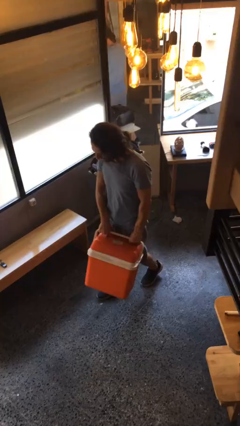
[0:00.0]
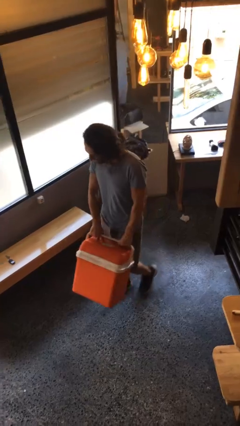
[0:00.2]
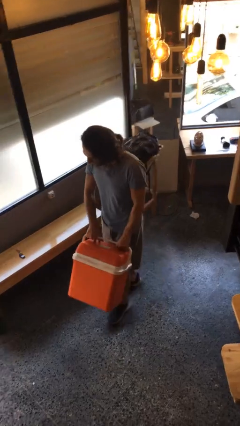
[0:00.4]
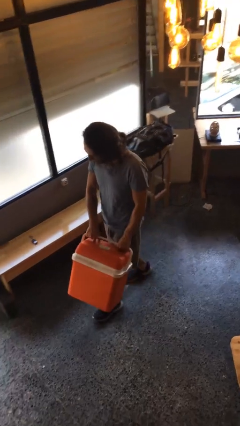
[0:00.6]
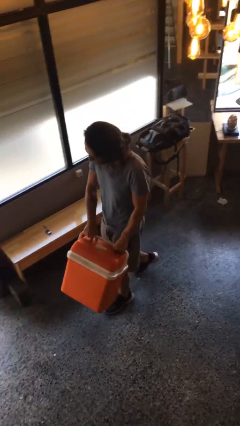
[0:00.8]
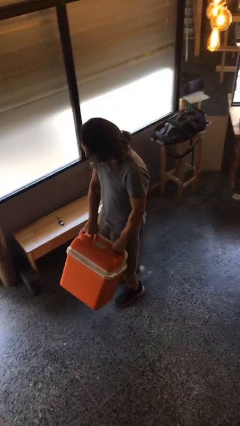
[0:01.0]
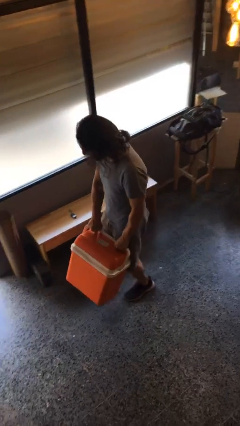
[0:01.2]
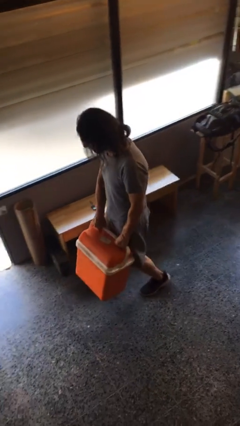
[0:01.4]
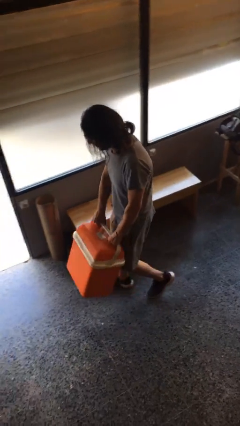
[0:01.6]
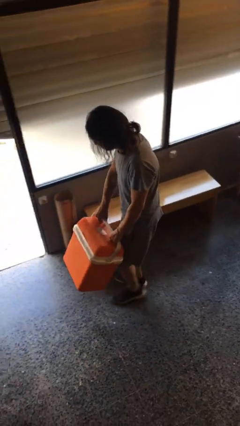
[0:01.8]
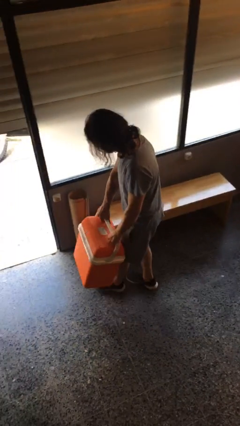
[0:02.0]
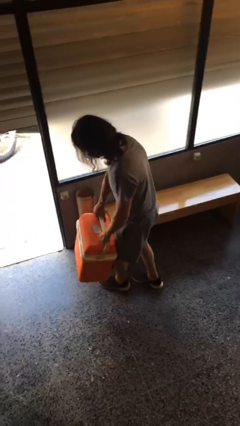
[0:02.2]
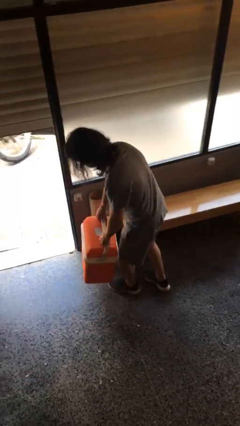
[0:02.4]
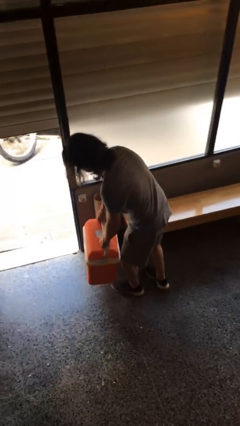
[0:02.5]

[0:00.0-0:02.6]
person carries heavy object

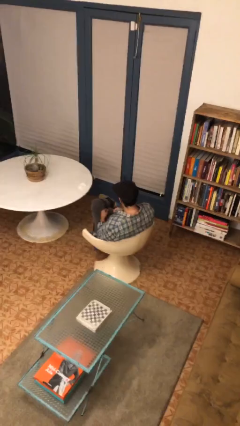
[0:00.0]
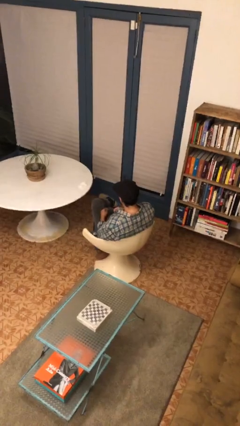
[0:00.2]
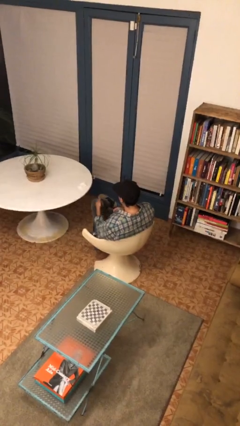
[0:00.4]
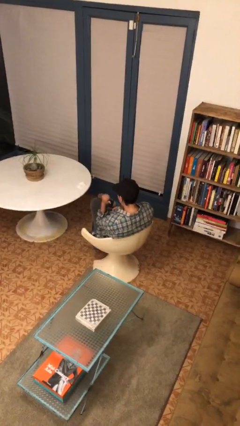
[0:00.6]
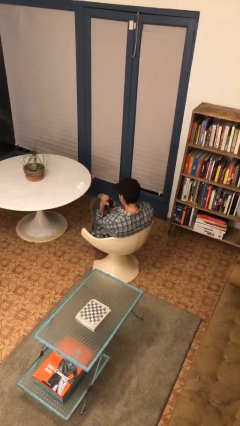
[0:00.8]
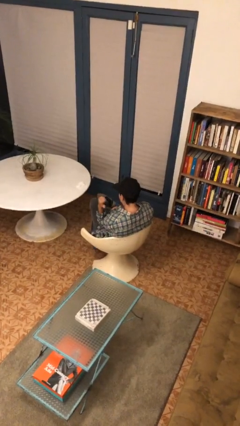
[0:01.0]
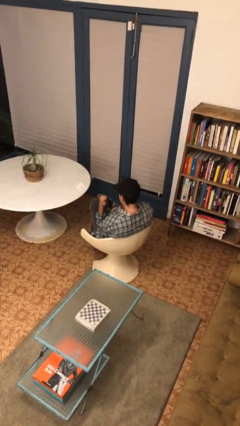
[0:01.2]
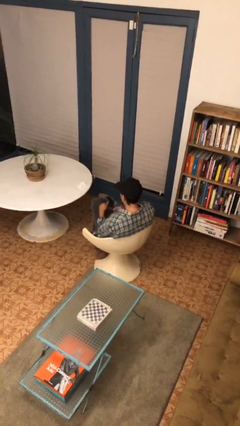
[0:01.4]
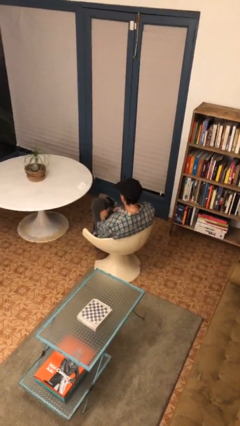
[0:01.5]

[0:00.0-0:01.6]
person gestures behind me

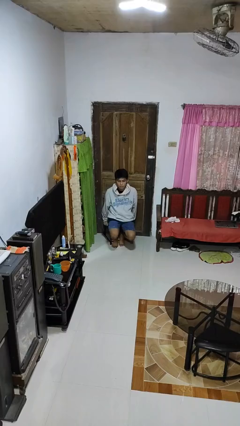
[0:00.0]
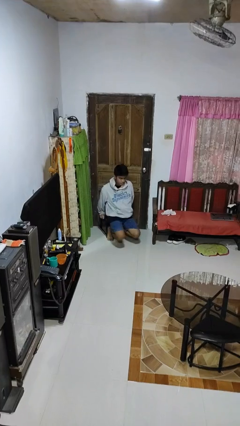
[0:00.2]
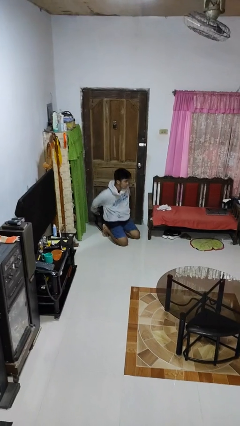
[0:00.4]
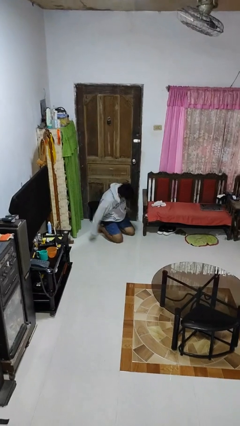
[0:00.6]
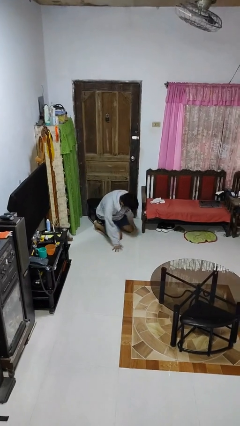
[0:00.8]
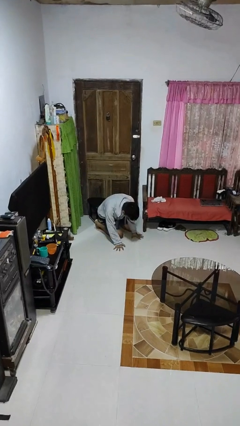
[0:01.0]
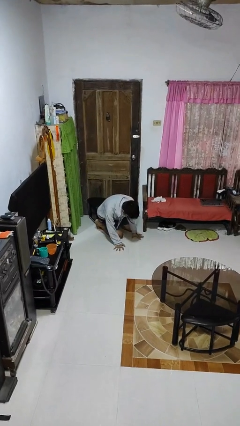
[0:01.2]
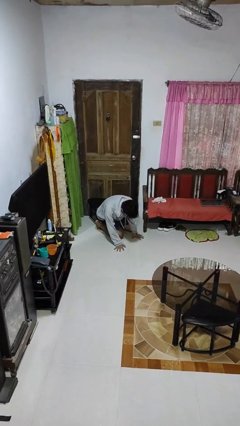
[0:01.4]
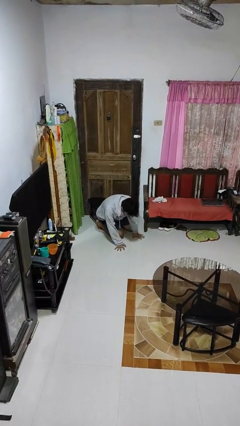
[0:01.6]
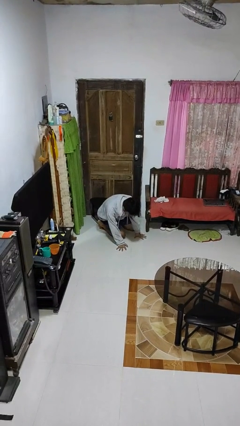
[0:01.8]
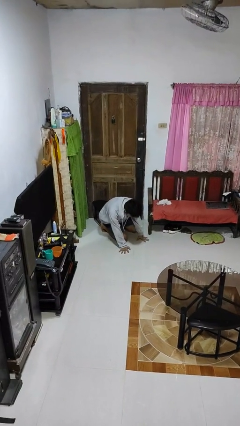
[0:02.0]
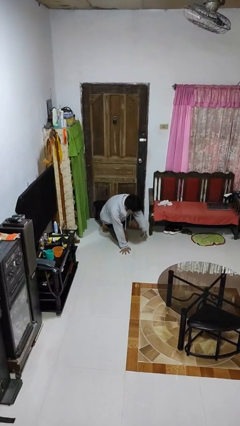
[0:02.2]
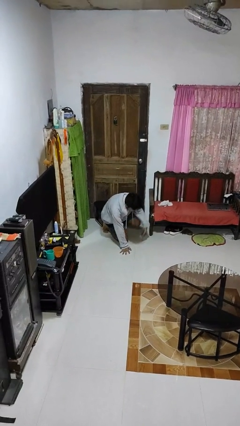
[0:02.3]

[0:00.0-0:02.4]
person falls from chair

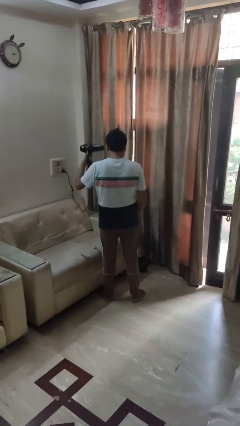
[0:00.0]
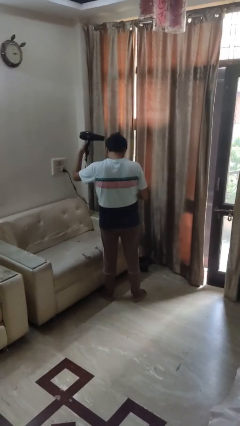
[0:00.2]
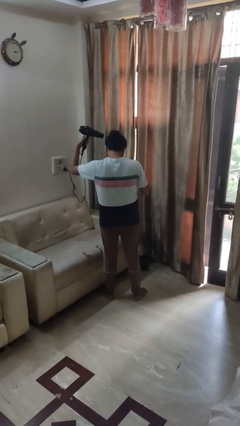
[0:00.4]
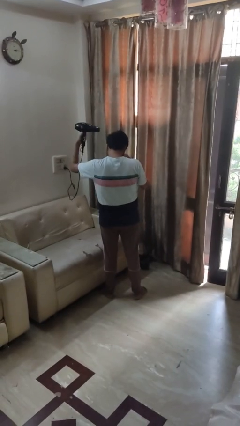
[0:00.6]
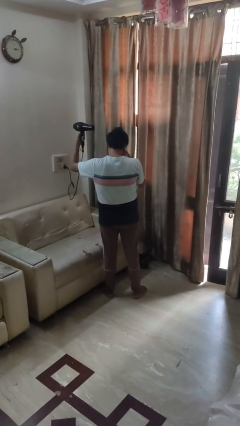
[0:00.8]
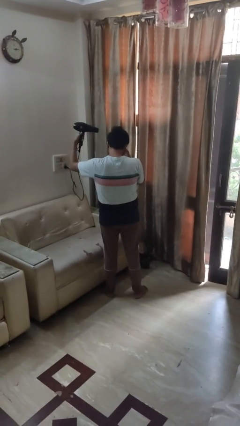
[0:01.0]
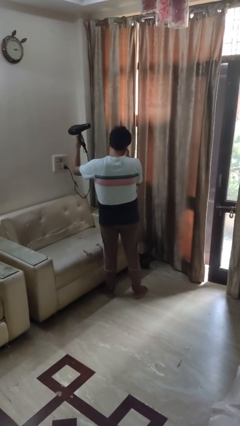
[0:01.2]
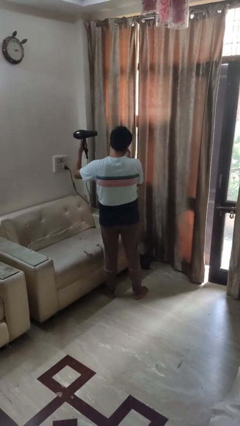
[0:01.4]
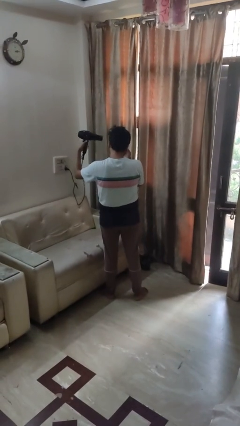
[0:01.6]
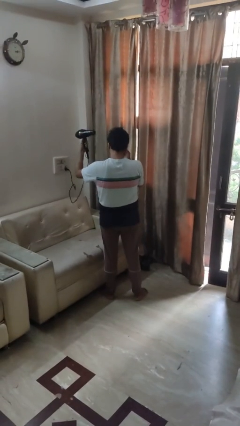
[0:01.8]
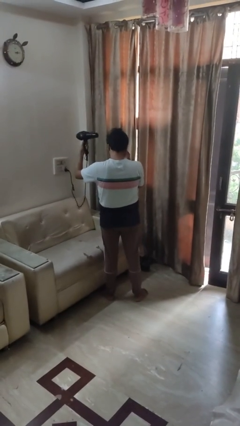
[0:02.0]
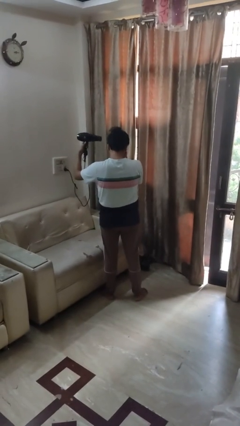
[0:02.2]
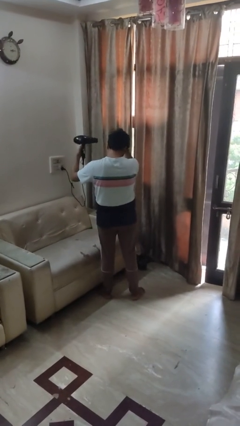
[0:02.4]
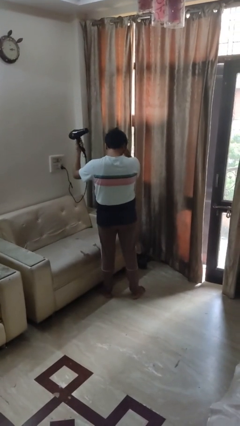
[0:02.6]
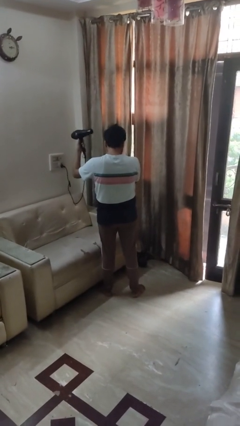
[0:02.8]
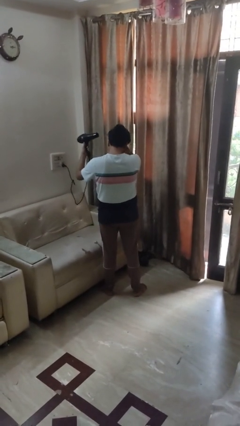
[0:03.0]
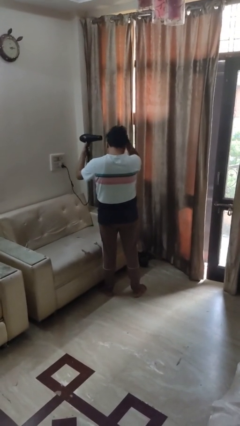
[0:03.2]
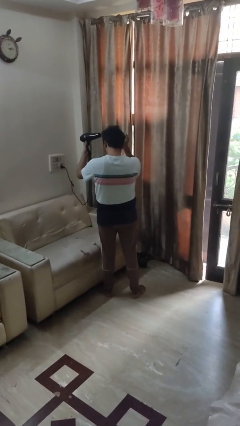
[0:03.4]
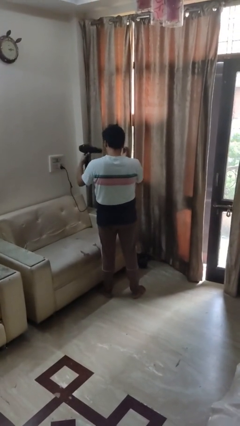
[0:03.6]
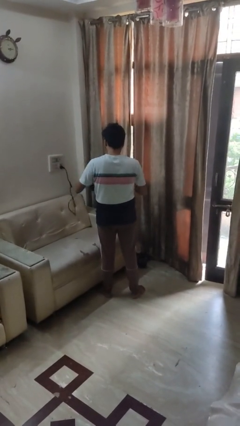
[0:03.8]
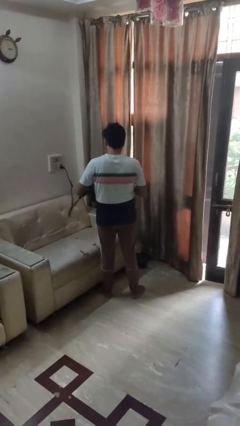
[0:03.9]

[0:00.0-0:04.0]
person dries hair with hairdryer

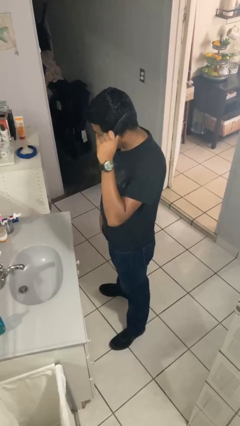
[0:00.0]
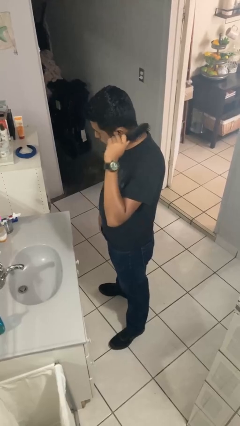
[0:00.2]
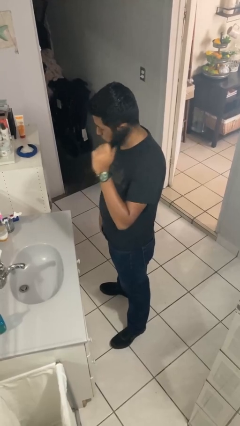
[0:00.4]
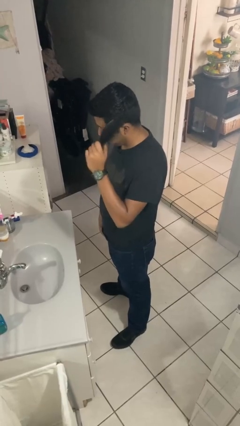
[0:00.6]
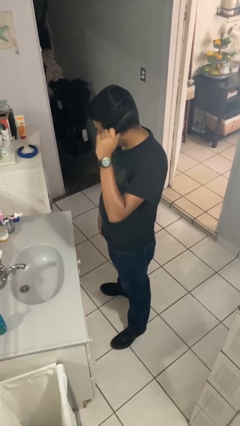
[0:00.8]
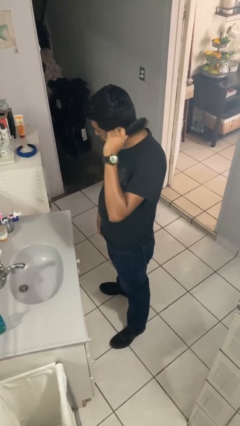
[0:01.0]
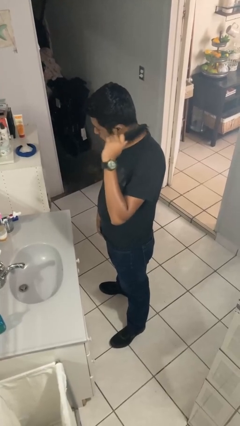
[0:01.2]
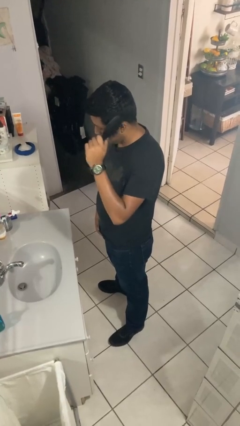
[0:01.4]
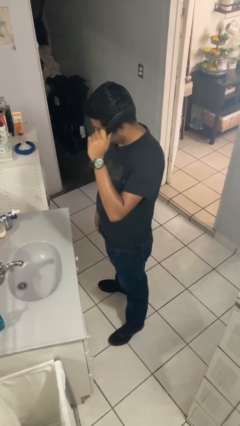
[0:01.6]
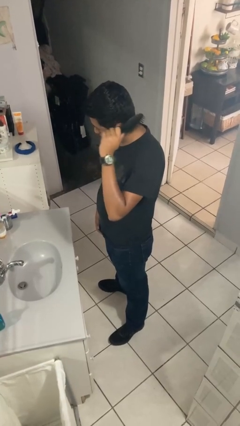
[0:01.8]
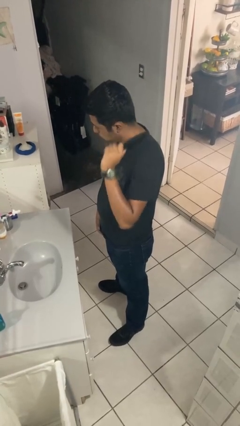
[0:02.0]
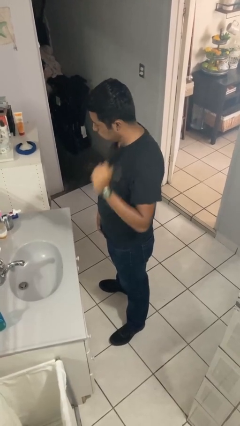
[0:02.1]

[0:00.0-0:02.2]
person brushes hair

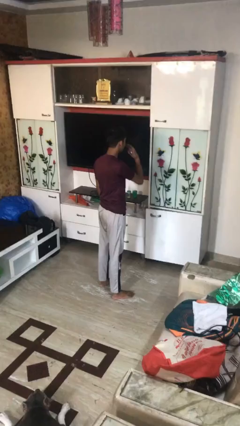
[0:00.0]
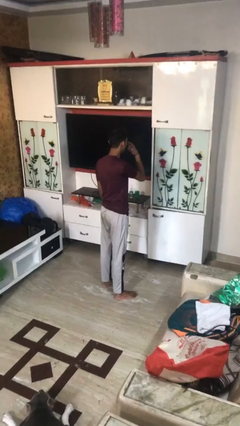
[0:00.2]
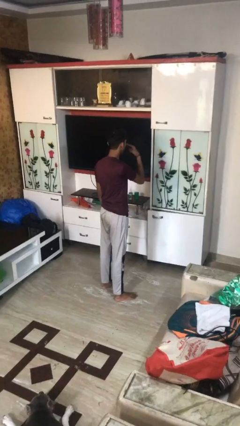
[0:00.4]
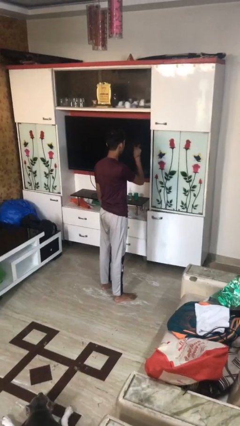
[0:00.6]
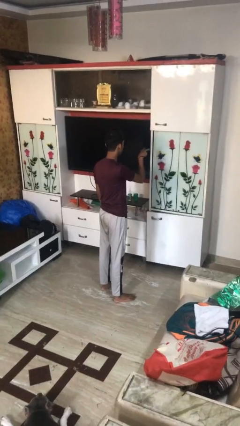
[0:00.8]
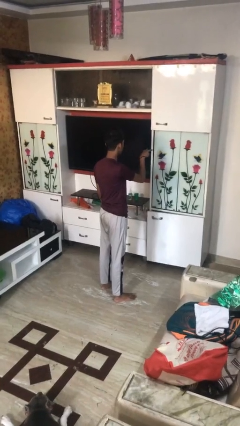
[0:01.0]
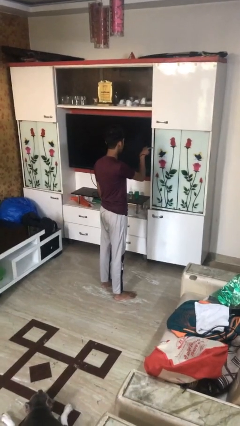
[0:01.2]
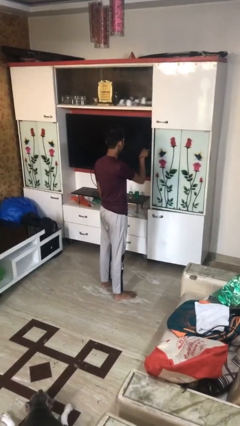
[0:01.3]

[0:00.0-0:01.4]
person gestures watch closely

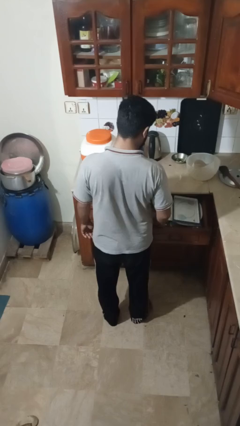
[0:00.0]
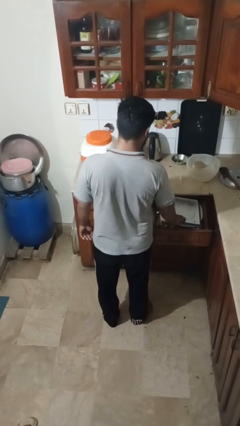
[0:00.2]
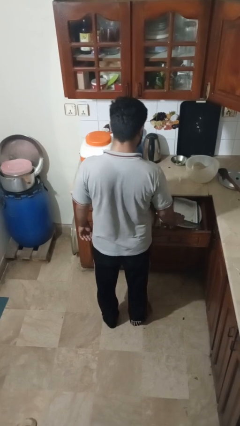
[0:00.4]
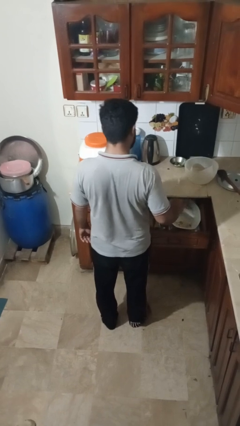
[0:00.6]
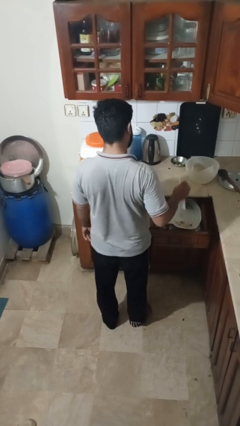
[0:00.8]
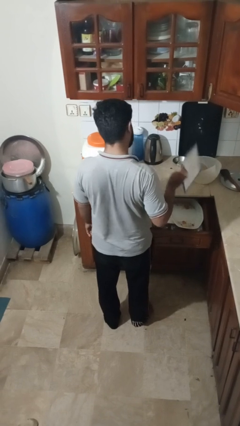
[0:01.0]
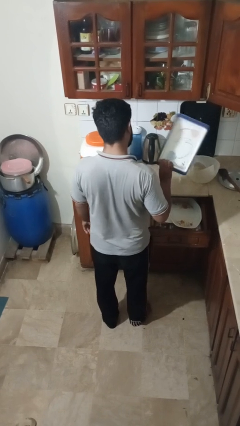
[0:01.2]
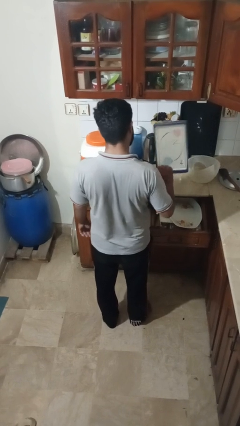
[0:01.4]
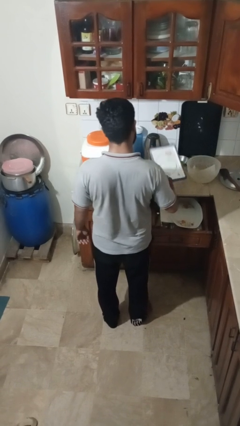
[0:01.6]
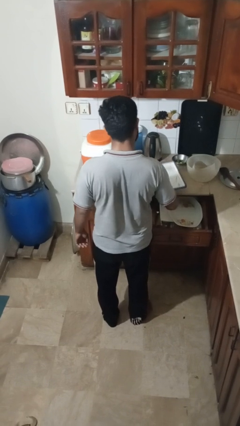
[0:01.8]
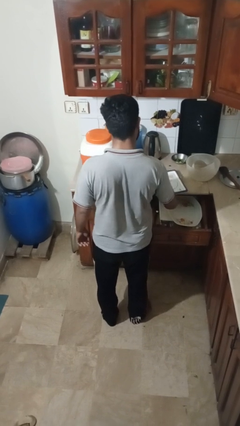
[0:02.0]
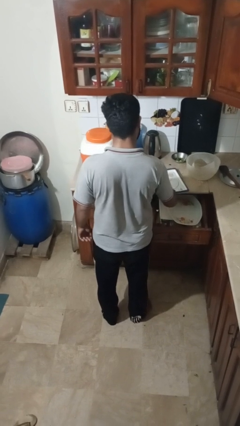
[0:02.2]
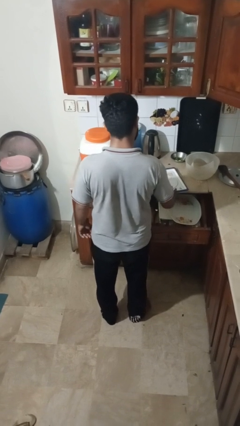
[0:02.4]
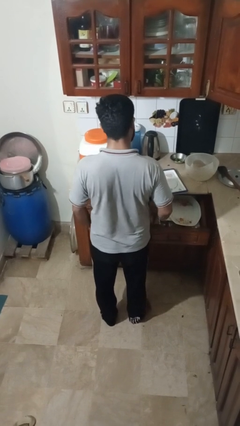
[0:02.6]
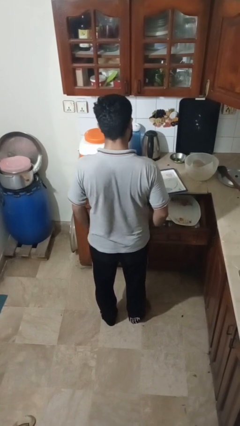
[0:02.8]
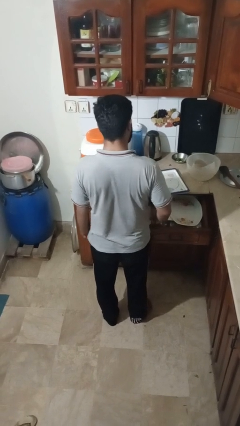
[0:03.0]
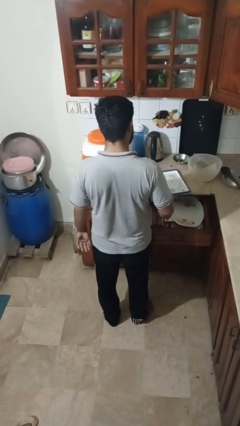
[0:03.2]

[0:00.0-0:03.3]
person takes object from kitchen drawer
